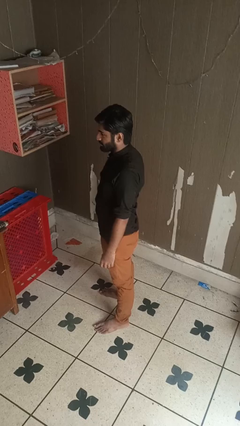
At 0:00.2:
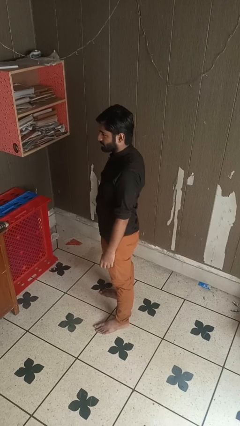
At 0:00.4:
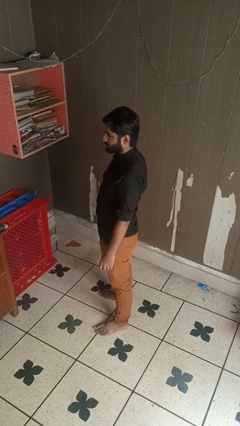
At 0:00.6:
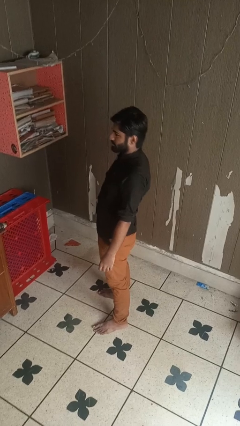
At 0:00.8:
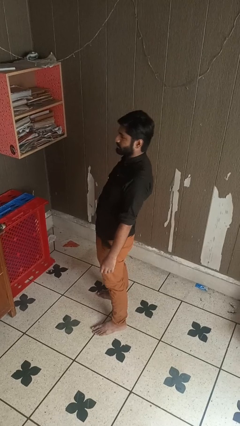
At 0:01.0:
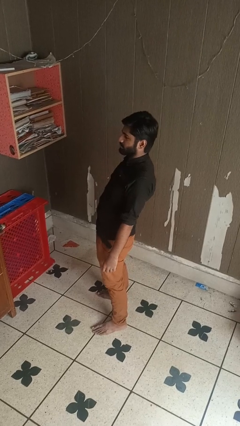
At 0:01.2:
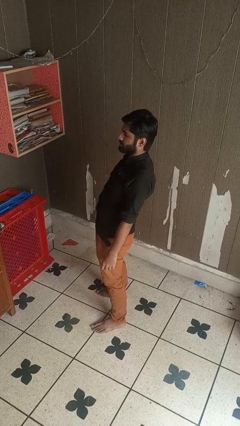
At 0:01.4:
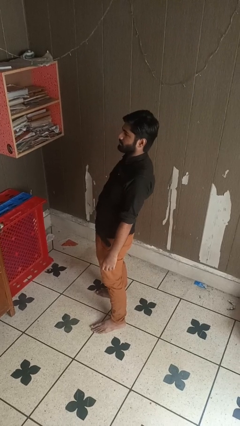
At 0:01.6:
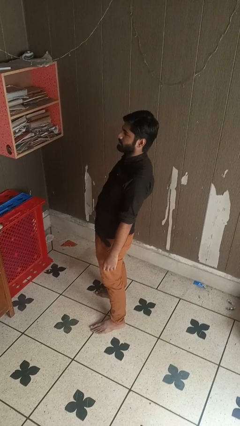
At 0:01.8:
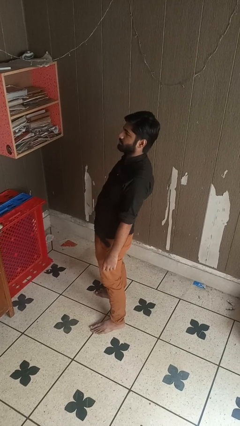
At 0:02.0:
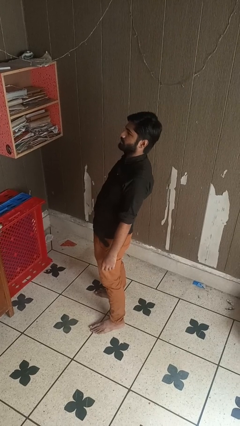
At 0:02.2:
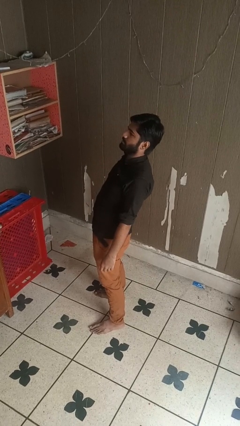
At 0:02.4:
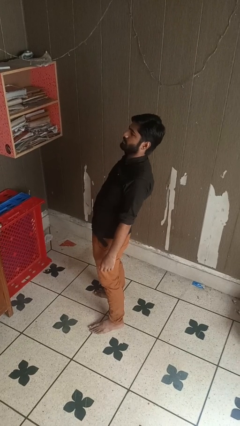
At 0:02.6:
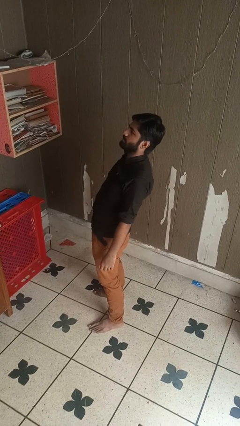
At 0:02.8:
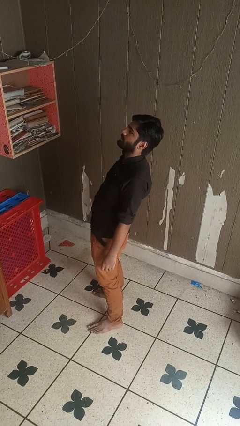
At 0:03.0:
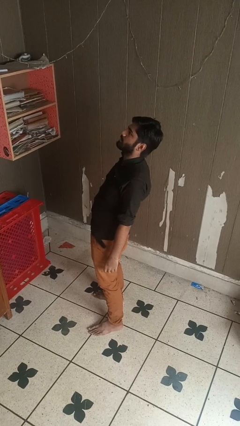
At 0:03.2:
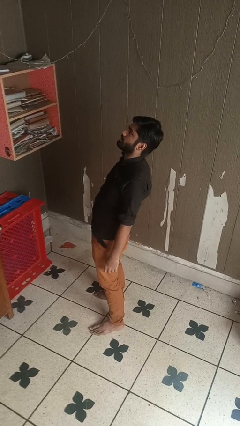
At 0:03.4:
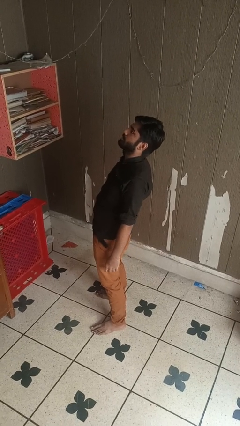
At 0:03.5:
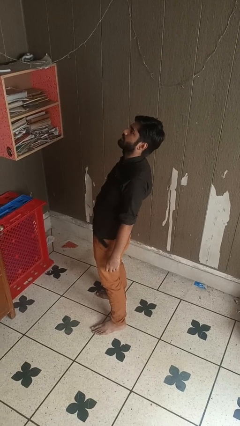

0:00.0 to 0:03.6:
person stretches back

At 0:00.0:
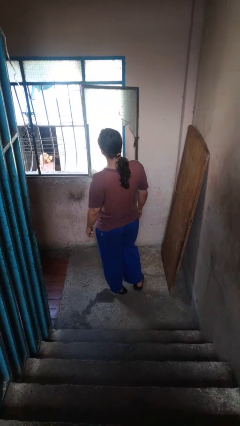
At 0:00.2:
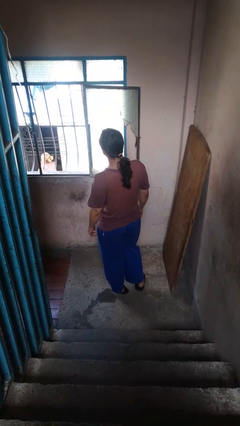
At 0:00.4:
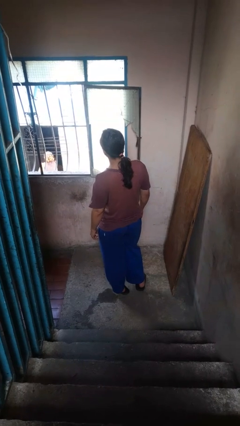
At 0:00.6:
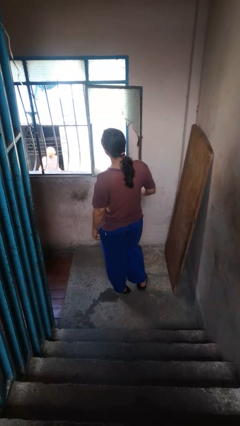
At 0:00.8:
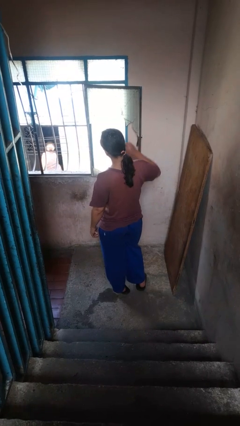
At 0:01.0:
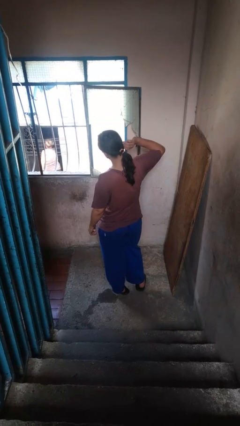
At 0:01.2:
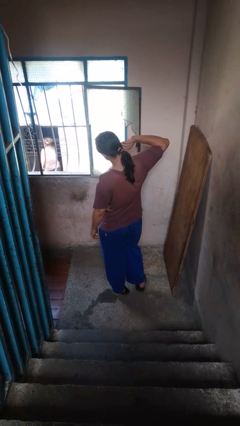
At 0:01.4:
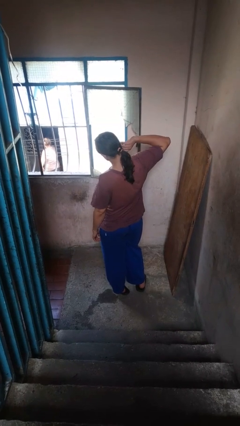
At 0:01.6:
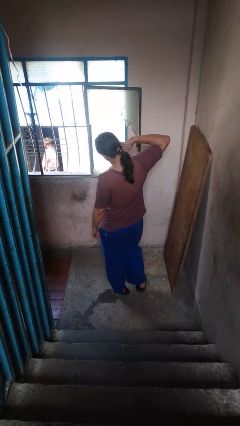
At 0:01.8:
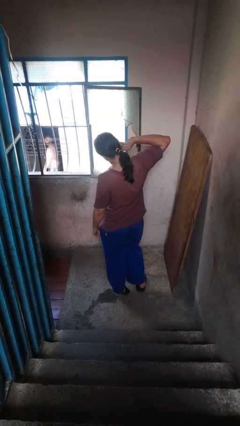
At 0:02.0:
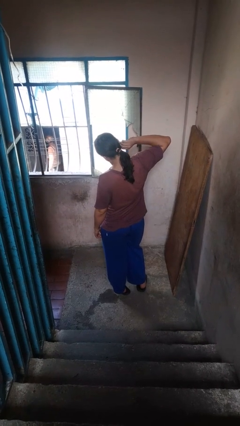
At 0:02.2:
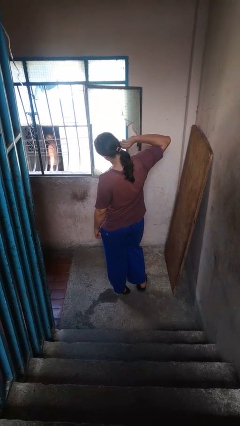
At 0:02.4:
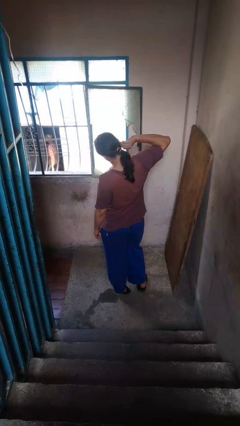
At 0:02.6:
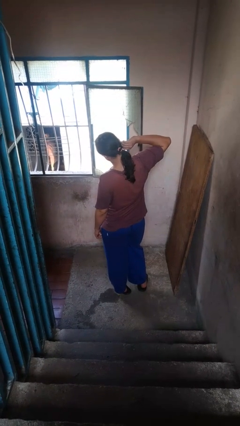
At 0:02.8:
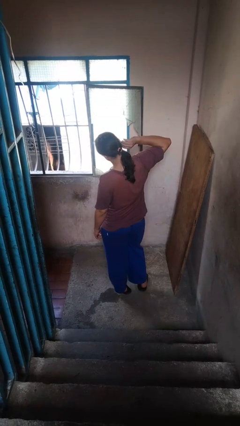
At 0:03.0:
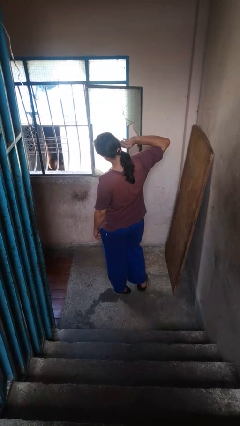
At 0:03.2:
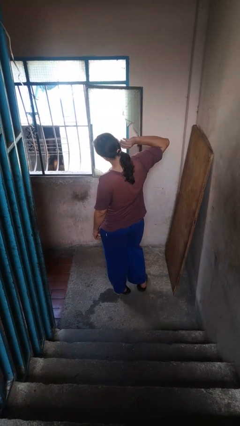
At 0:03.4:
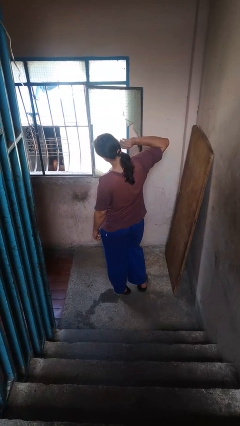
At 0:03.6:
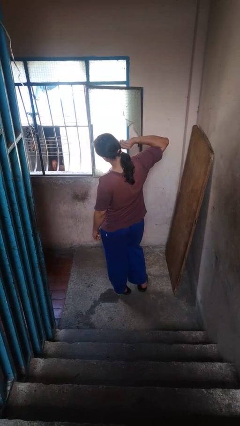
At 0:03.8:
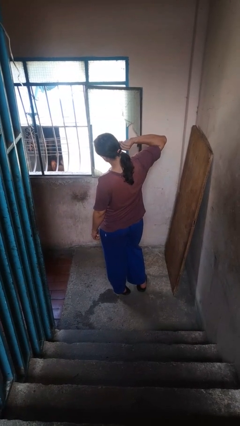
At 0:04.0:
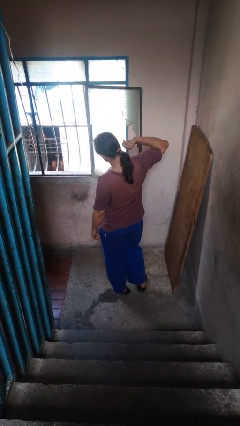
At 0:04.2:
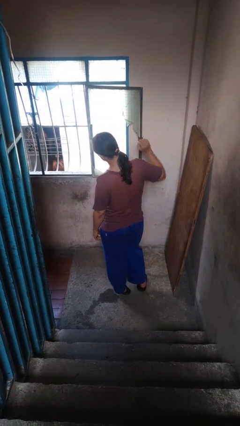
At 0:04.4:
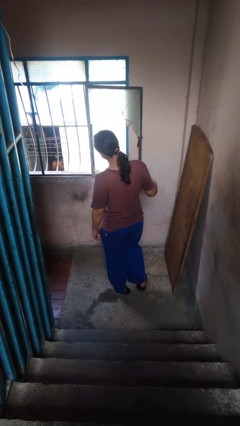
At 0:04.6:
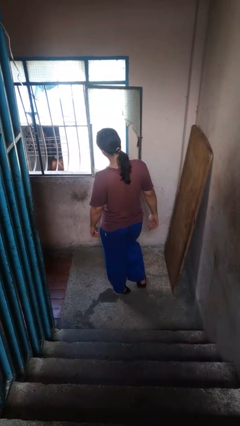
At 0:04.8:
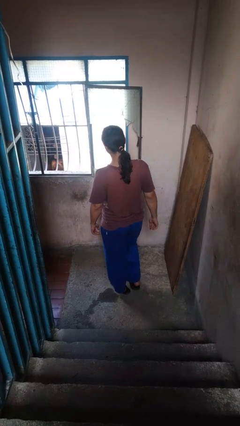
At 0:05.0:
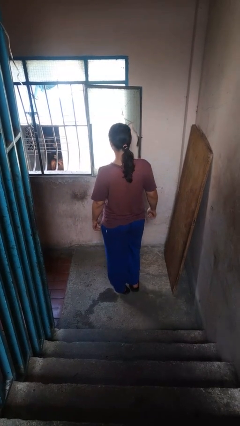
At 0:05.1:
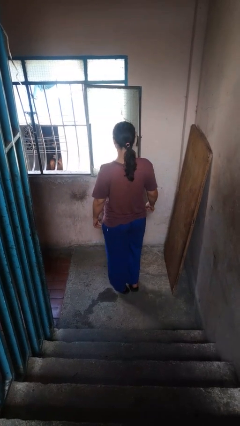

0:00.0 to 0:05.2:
person touches earlobe

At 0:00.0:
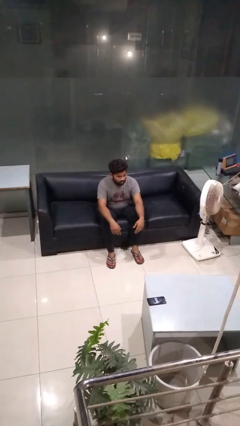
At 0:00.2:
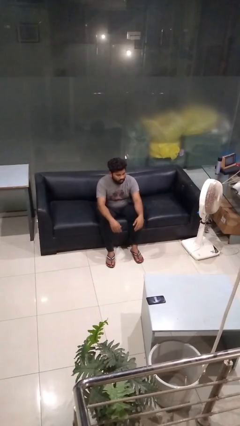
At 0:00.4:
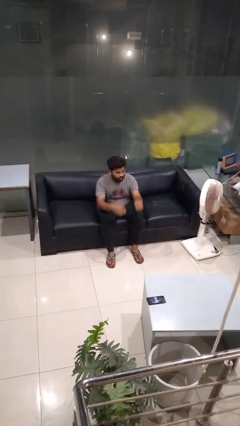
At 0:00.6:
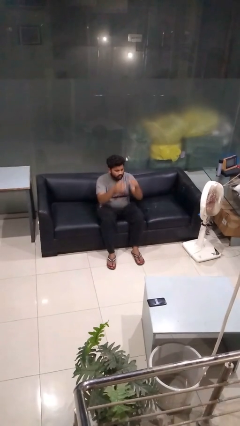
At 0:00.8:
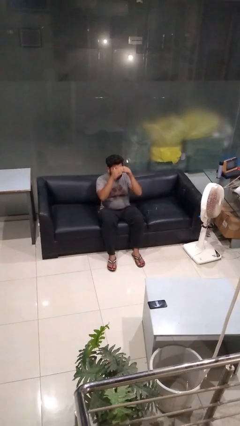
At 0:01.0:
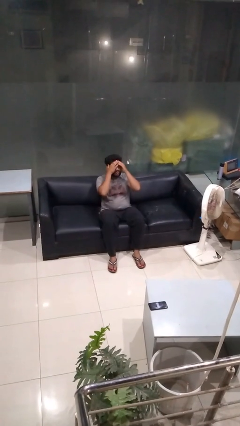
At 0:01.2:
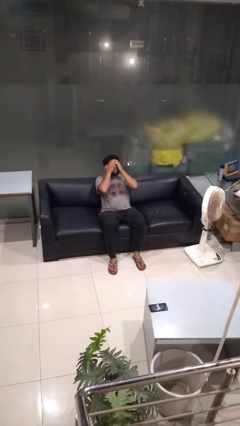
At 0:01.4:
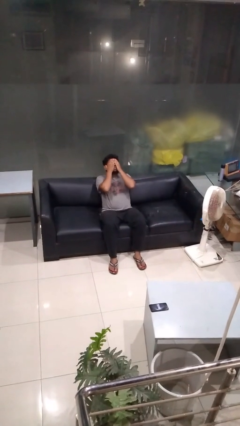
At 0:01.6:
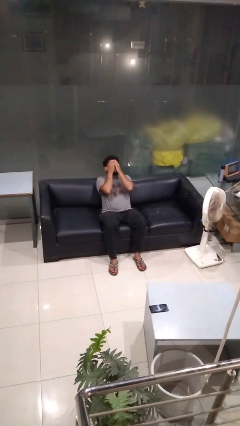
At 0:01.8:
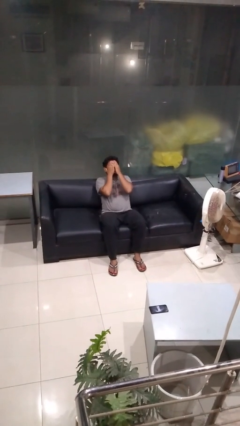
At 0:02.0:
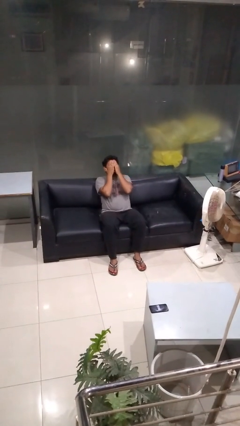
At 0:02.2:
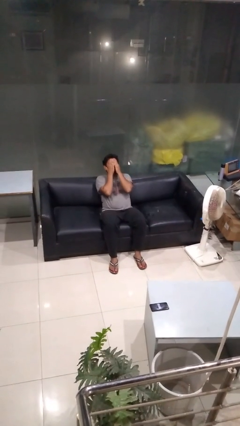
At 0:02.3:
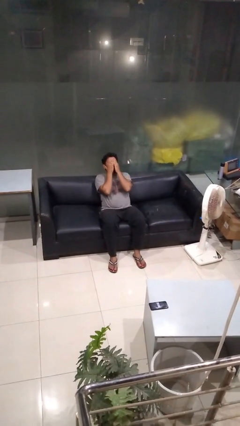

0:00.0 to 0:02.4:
person covers face with hands

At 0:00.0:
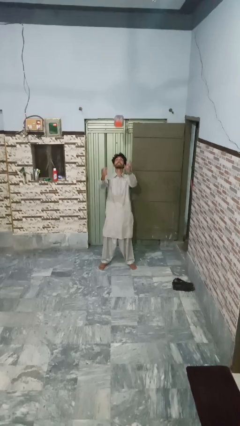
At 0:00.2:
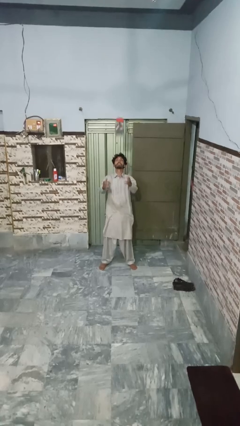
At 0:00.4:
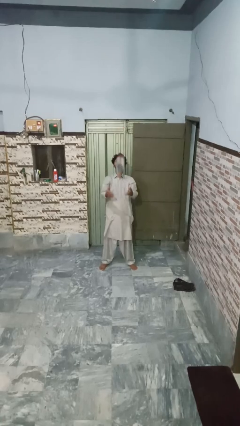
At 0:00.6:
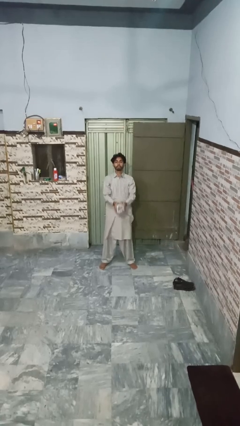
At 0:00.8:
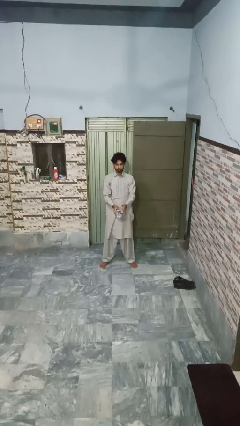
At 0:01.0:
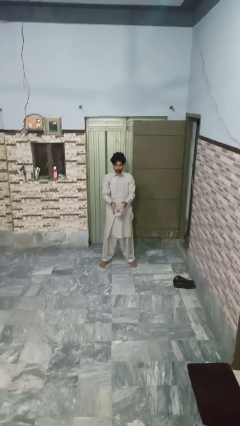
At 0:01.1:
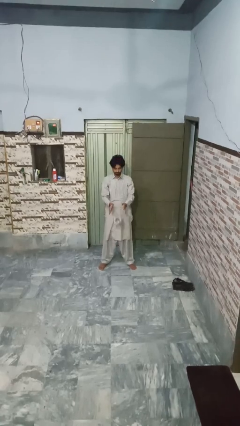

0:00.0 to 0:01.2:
person drops object

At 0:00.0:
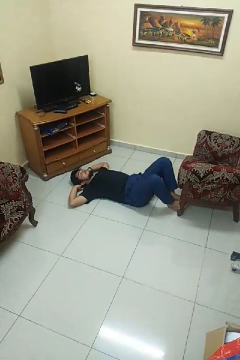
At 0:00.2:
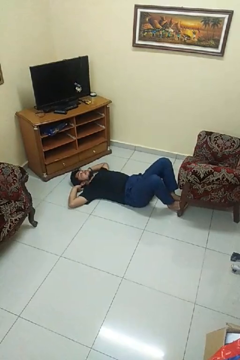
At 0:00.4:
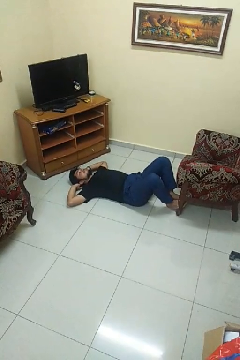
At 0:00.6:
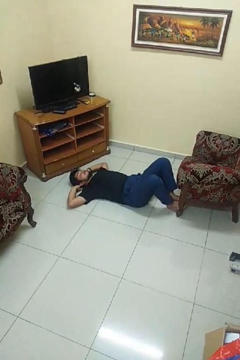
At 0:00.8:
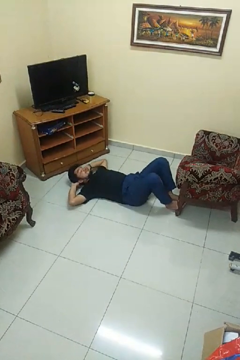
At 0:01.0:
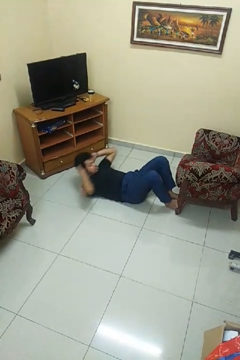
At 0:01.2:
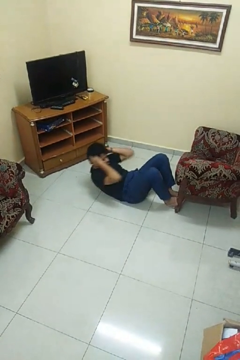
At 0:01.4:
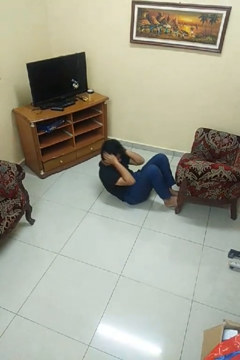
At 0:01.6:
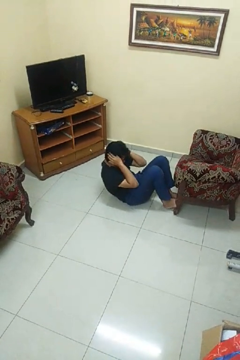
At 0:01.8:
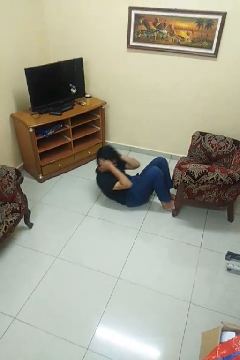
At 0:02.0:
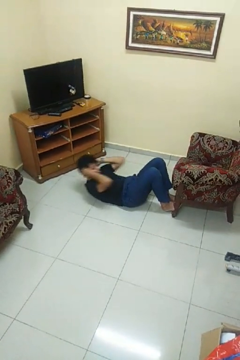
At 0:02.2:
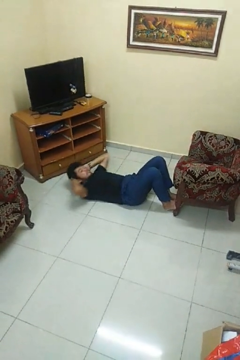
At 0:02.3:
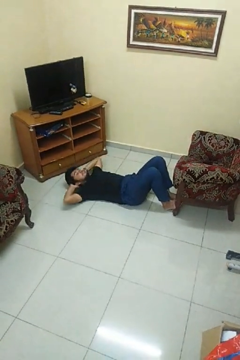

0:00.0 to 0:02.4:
person exercises with situp

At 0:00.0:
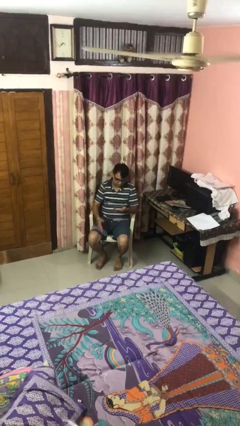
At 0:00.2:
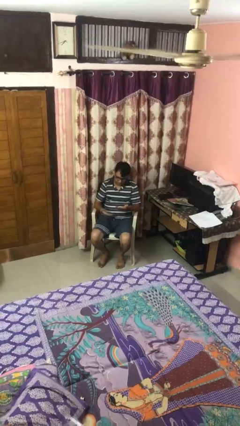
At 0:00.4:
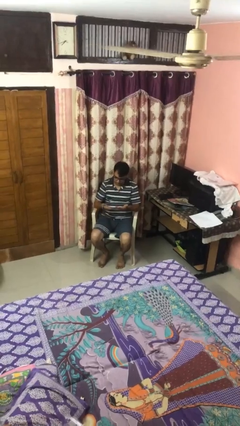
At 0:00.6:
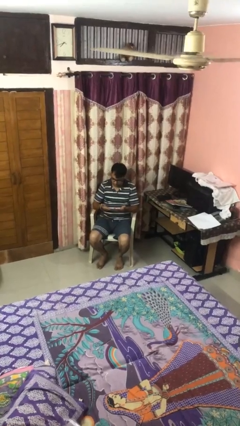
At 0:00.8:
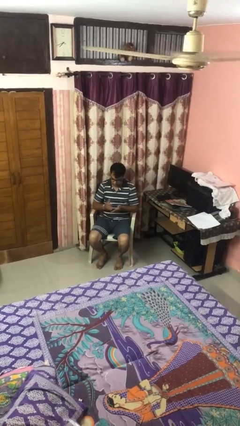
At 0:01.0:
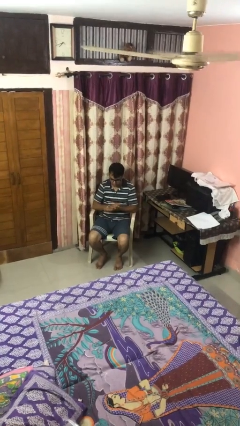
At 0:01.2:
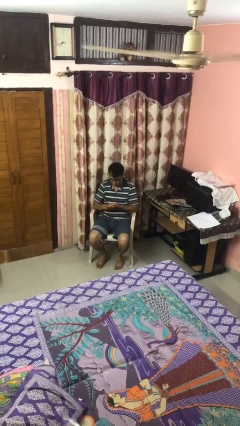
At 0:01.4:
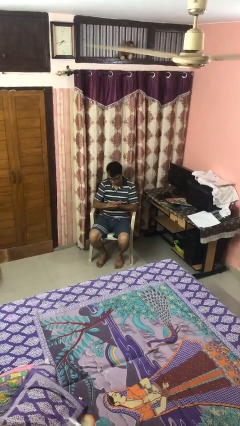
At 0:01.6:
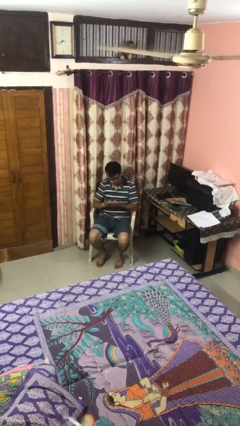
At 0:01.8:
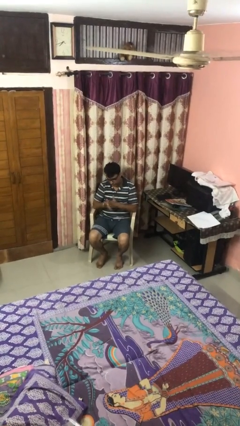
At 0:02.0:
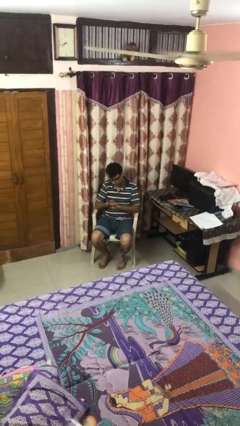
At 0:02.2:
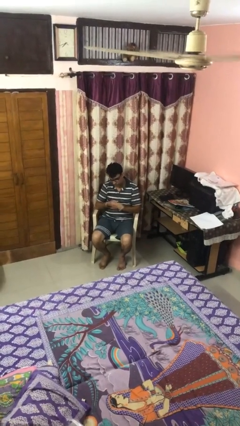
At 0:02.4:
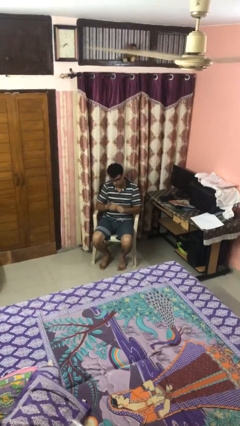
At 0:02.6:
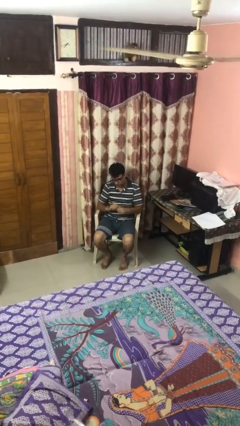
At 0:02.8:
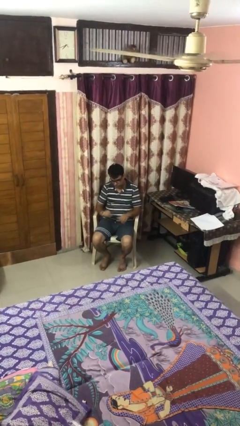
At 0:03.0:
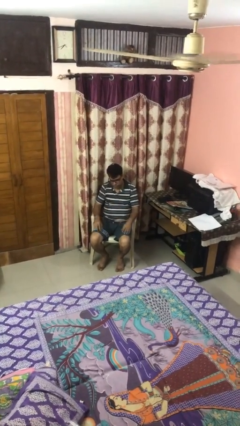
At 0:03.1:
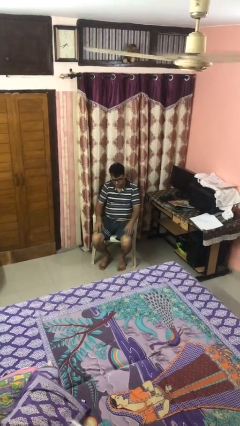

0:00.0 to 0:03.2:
person looks at hands in lap
